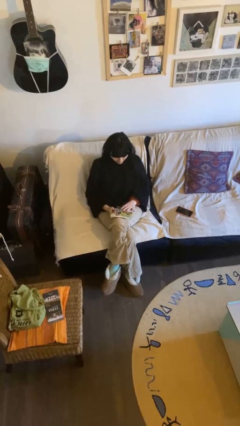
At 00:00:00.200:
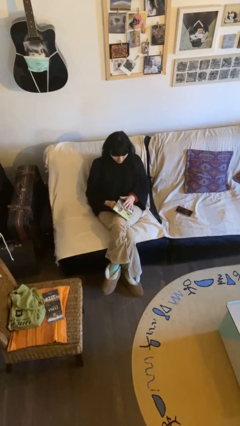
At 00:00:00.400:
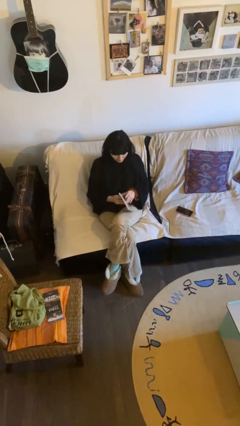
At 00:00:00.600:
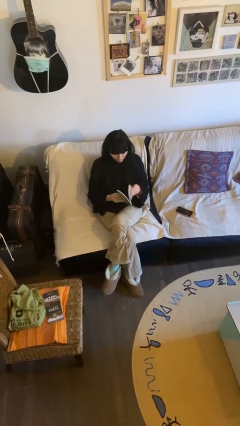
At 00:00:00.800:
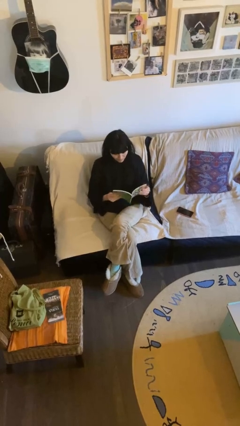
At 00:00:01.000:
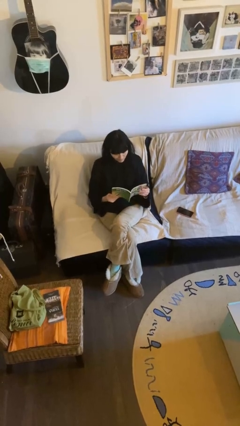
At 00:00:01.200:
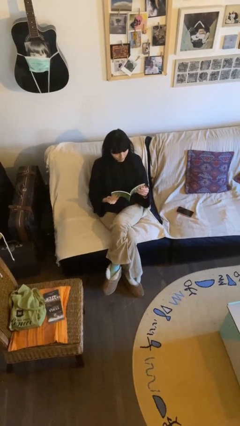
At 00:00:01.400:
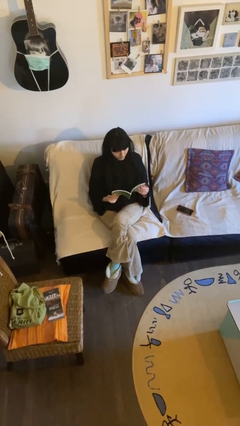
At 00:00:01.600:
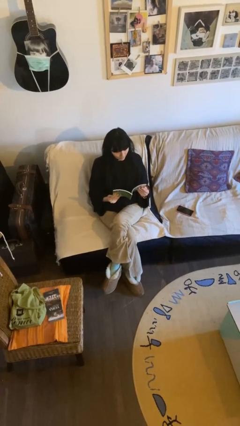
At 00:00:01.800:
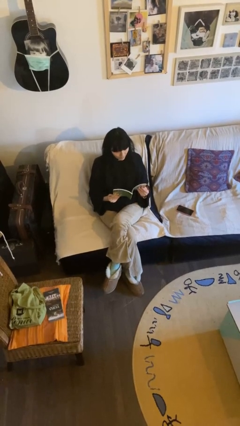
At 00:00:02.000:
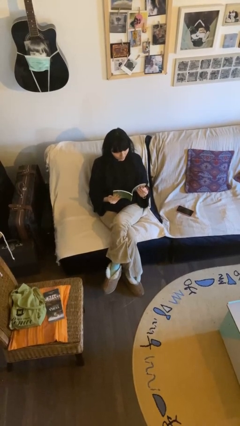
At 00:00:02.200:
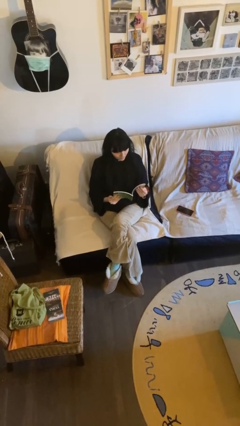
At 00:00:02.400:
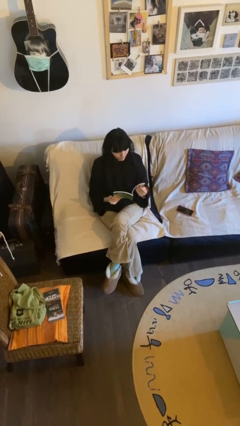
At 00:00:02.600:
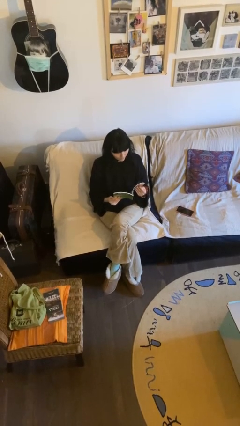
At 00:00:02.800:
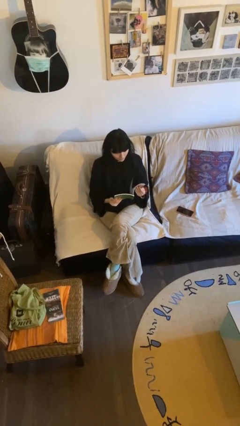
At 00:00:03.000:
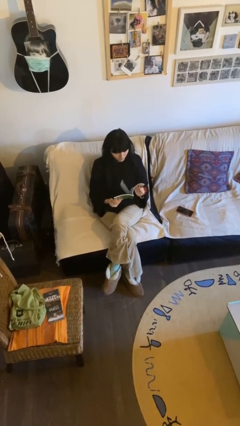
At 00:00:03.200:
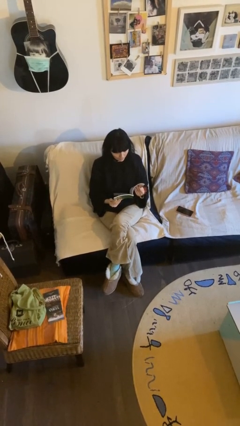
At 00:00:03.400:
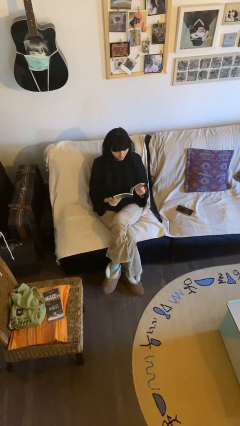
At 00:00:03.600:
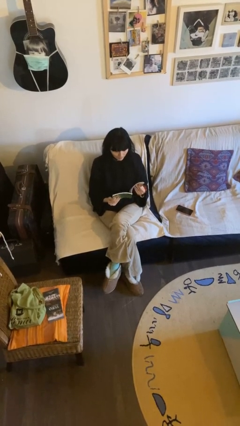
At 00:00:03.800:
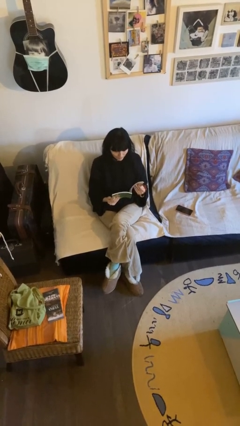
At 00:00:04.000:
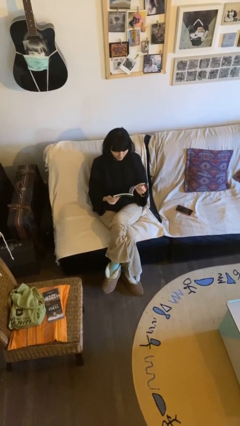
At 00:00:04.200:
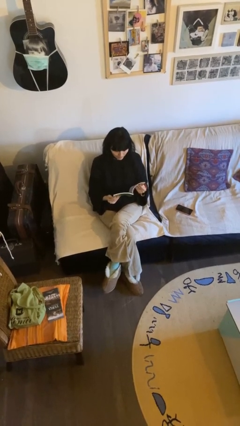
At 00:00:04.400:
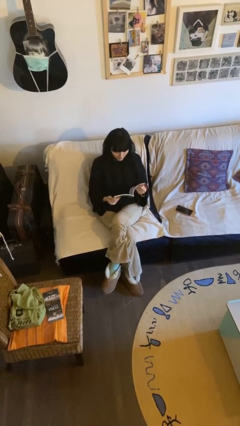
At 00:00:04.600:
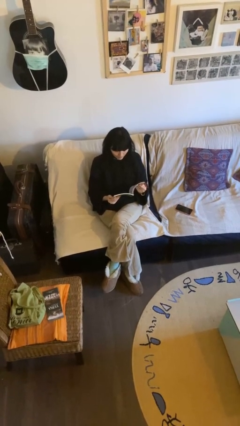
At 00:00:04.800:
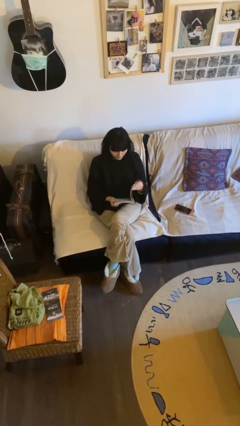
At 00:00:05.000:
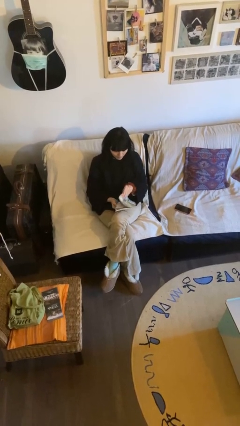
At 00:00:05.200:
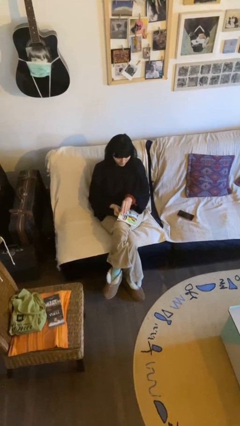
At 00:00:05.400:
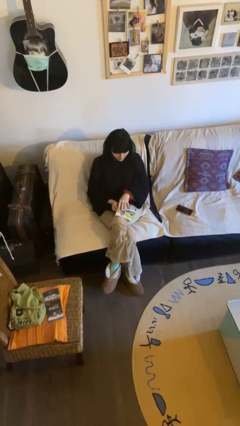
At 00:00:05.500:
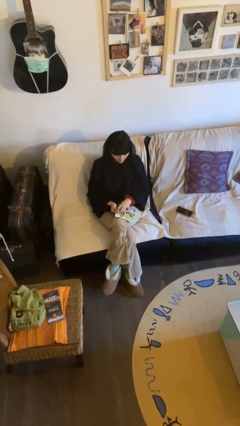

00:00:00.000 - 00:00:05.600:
person reads document

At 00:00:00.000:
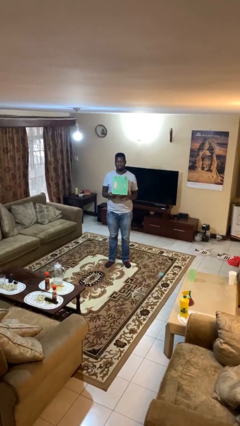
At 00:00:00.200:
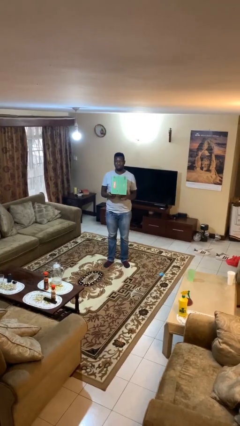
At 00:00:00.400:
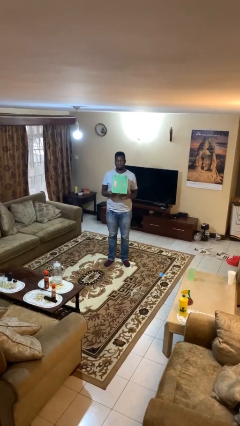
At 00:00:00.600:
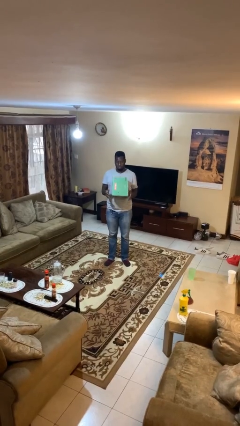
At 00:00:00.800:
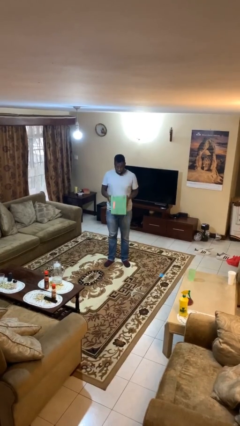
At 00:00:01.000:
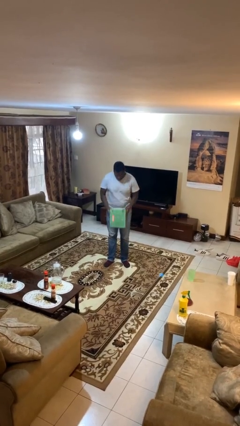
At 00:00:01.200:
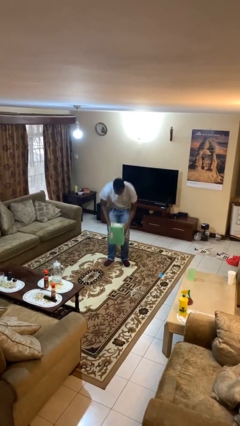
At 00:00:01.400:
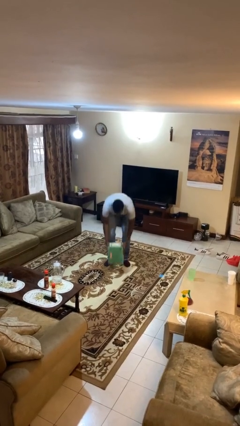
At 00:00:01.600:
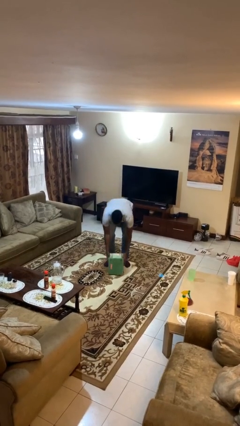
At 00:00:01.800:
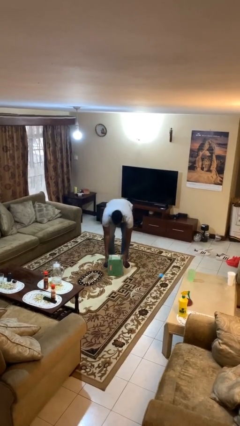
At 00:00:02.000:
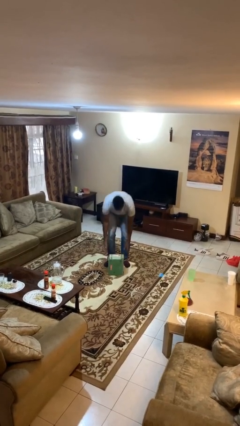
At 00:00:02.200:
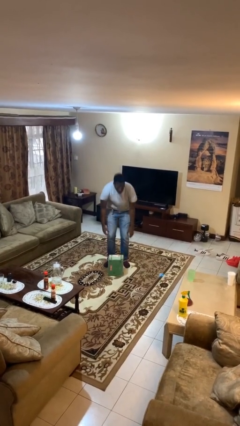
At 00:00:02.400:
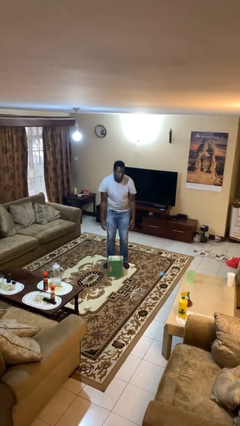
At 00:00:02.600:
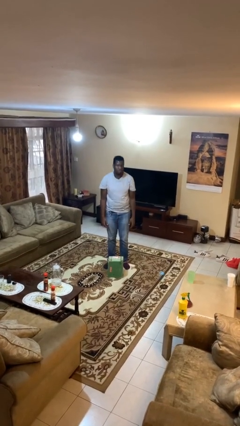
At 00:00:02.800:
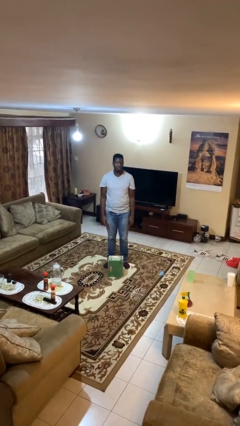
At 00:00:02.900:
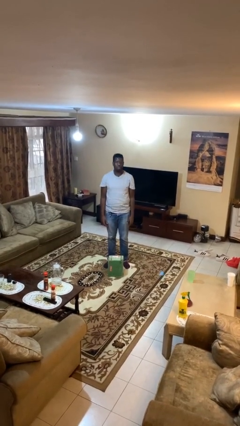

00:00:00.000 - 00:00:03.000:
person puts down object on floor

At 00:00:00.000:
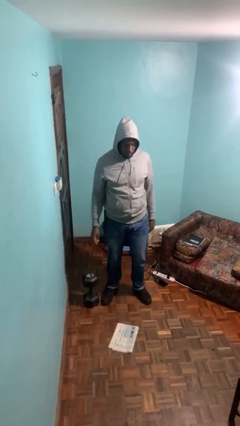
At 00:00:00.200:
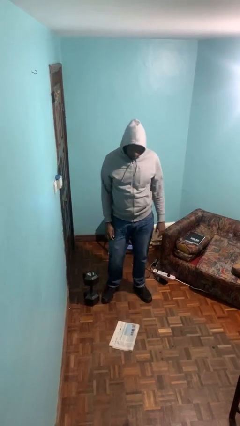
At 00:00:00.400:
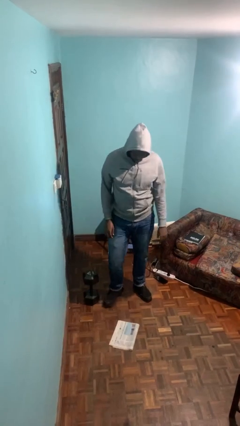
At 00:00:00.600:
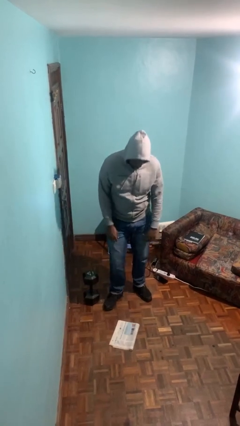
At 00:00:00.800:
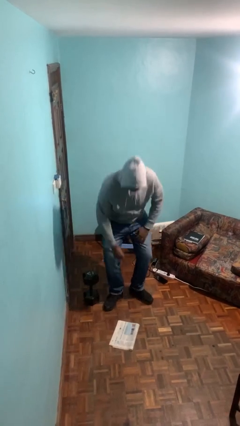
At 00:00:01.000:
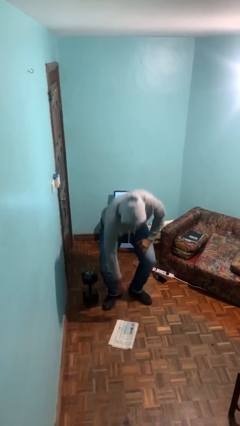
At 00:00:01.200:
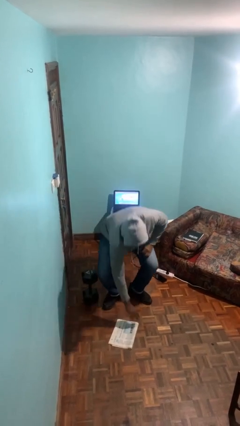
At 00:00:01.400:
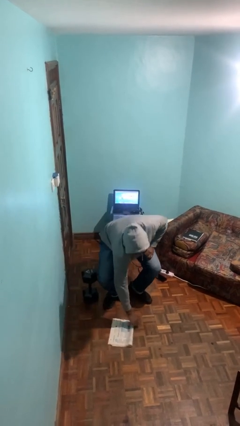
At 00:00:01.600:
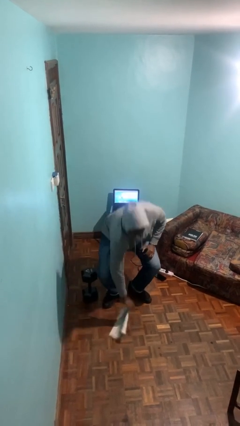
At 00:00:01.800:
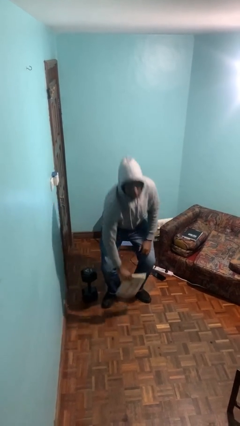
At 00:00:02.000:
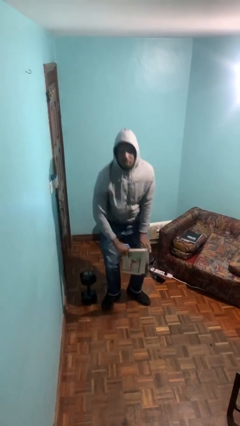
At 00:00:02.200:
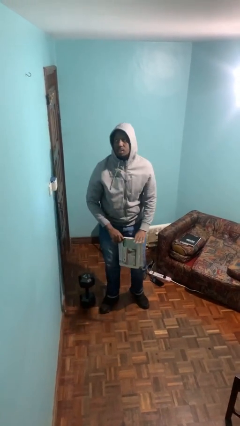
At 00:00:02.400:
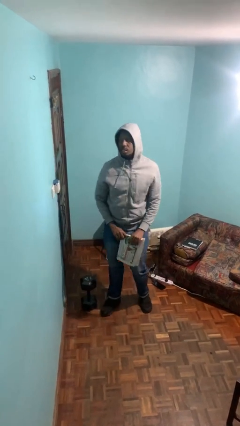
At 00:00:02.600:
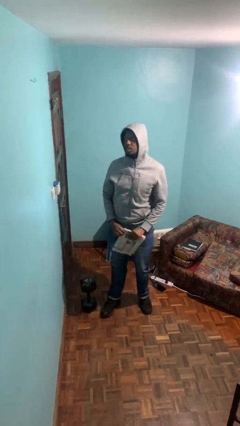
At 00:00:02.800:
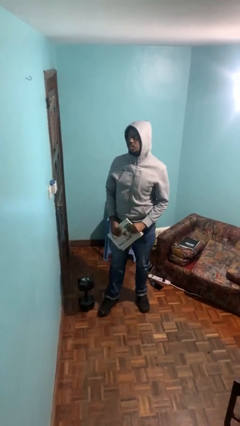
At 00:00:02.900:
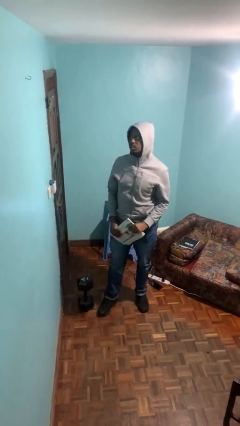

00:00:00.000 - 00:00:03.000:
person picks up object from floor

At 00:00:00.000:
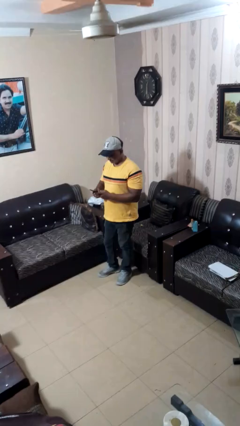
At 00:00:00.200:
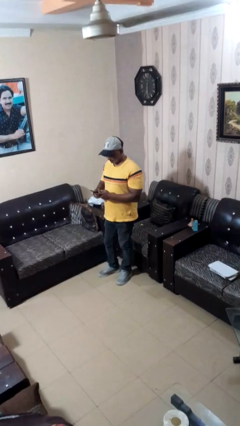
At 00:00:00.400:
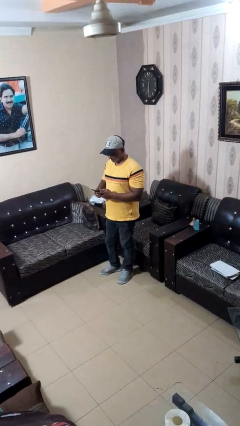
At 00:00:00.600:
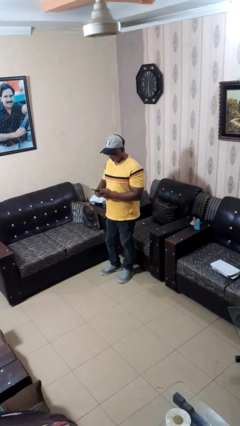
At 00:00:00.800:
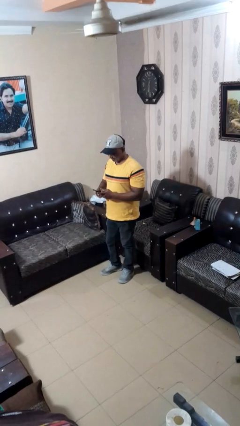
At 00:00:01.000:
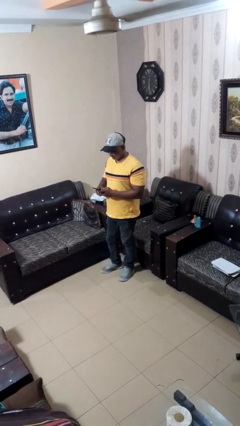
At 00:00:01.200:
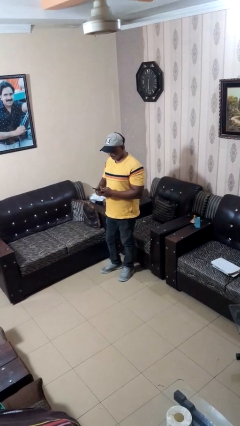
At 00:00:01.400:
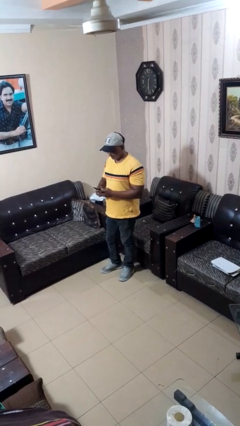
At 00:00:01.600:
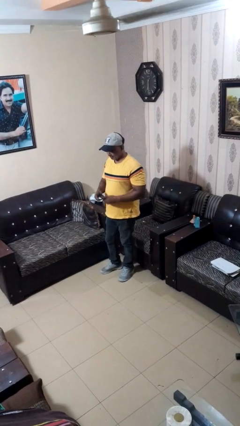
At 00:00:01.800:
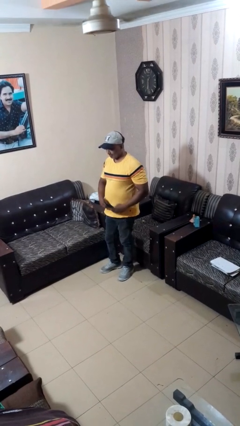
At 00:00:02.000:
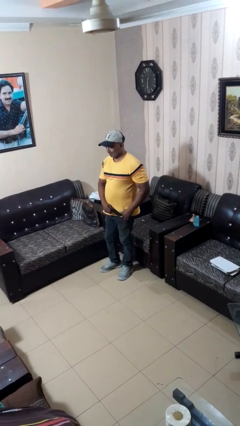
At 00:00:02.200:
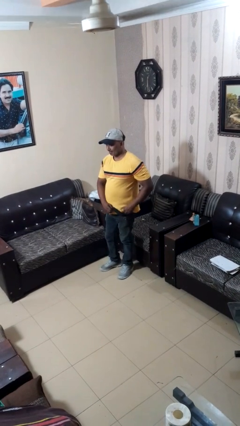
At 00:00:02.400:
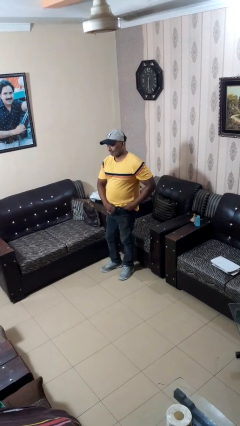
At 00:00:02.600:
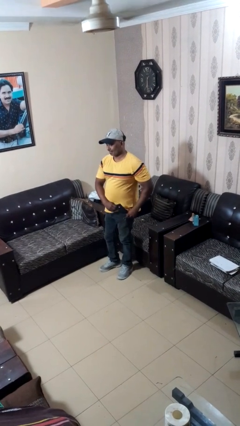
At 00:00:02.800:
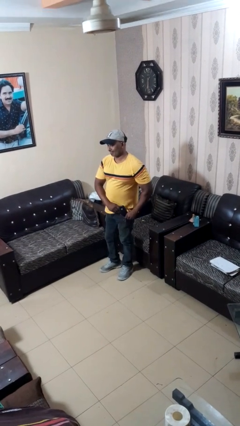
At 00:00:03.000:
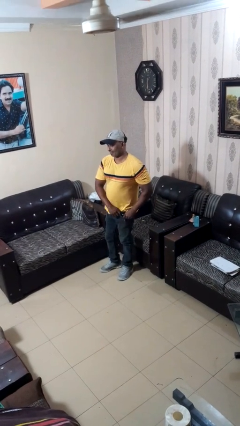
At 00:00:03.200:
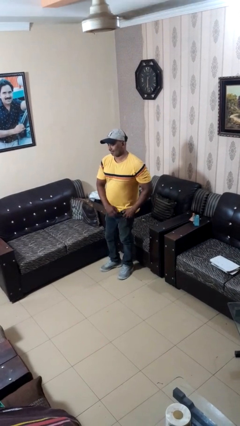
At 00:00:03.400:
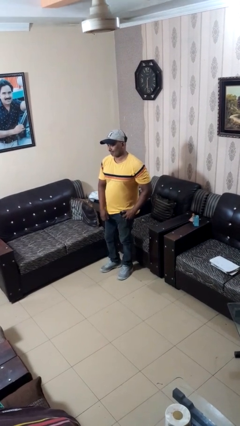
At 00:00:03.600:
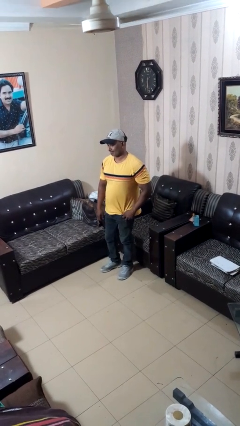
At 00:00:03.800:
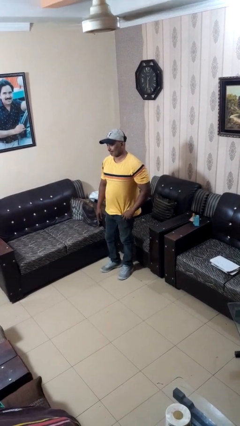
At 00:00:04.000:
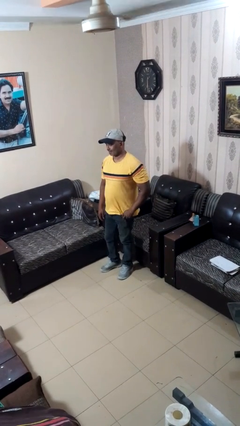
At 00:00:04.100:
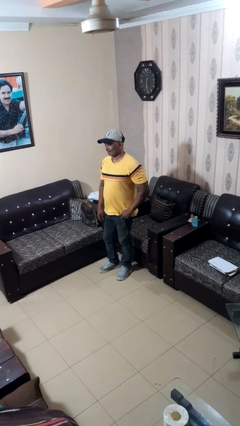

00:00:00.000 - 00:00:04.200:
person puts phone into pocket

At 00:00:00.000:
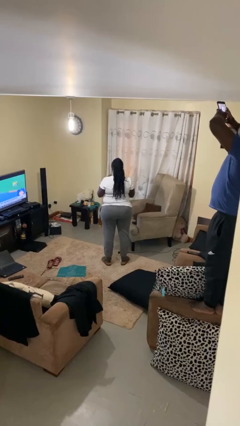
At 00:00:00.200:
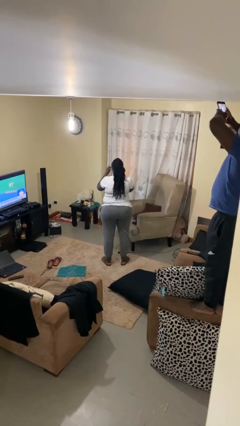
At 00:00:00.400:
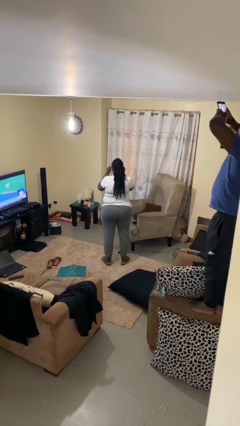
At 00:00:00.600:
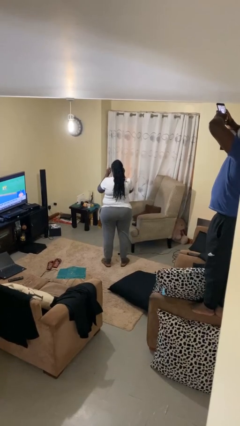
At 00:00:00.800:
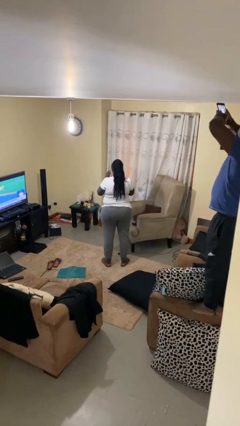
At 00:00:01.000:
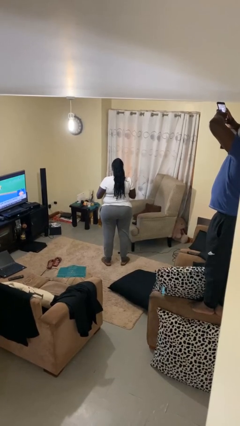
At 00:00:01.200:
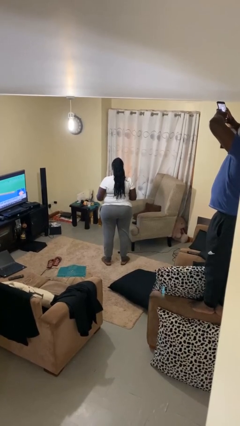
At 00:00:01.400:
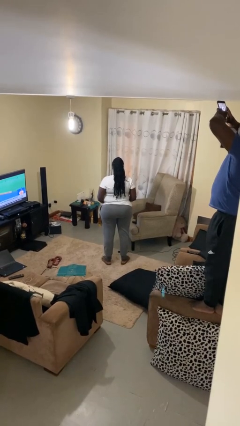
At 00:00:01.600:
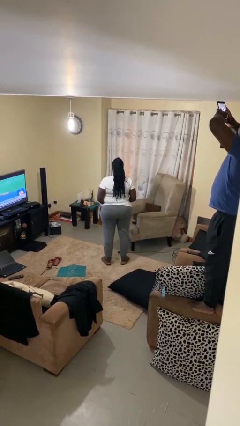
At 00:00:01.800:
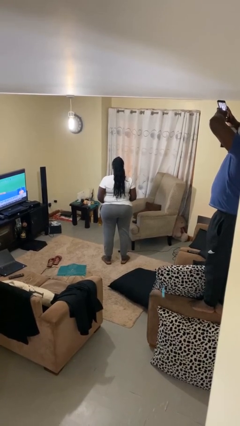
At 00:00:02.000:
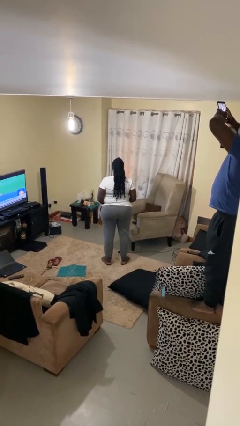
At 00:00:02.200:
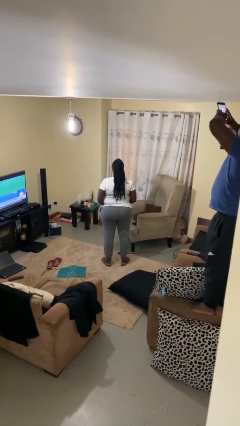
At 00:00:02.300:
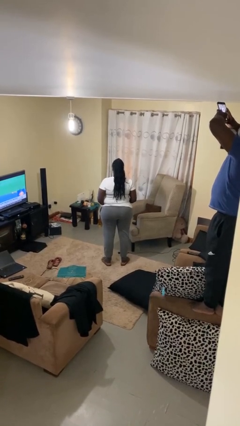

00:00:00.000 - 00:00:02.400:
person takes off sunglasses
